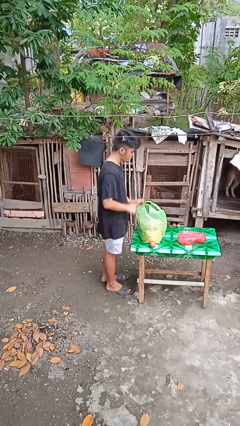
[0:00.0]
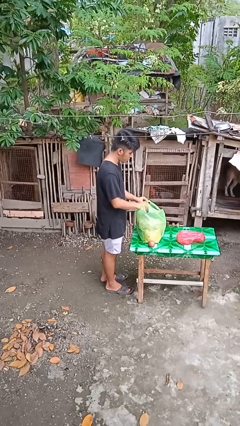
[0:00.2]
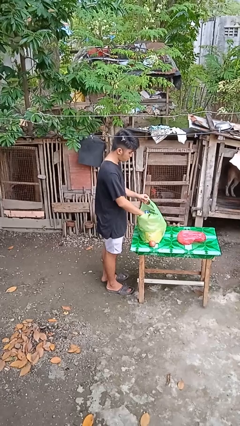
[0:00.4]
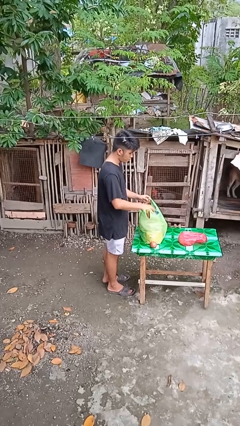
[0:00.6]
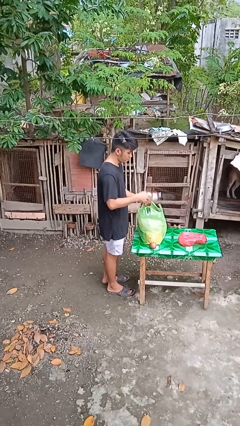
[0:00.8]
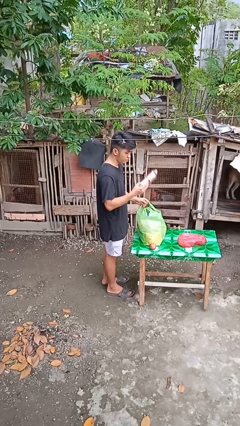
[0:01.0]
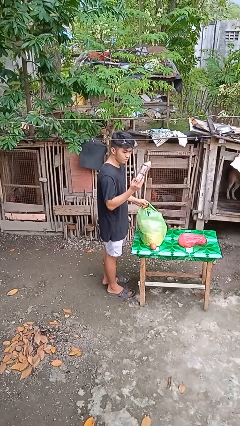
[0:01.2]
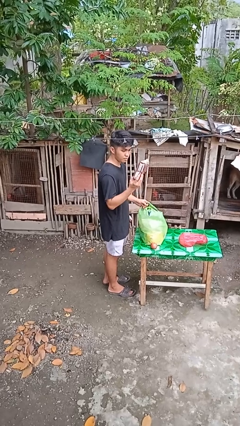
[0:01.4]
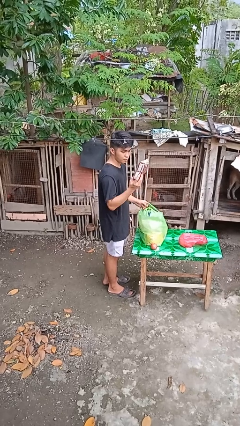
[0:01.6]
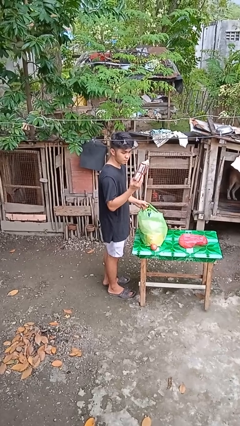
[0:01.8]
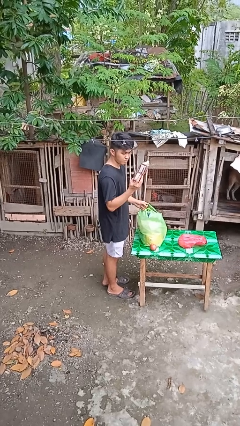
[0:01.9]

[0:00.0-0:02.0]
person takes object from bag

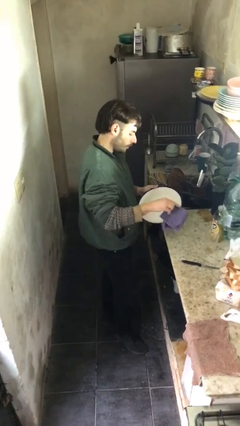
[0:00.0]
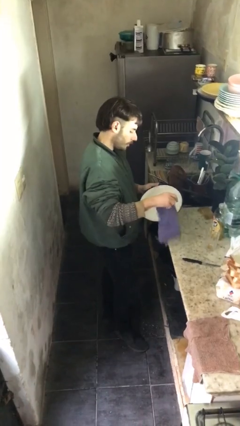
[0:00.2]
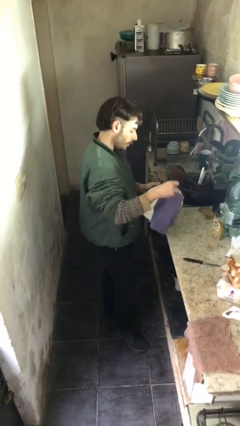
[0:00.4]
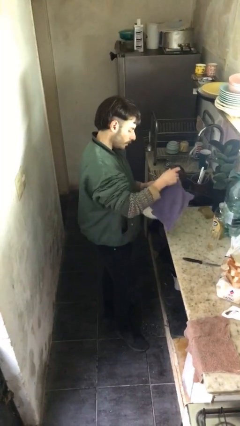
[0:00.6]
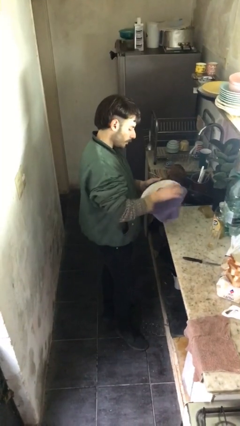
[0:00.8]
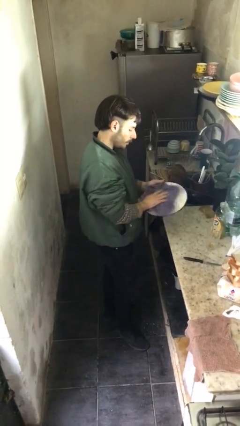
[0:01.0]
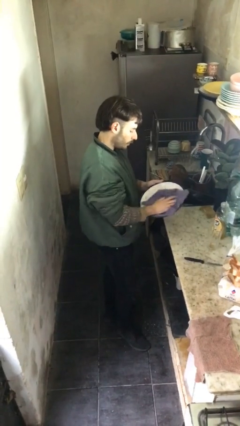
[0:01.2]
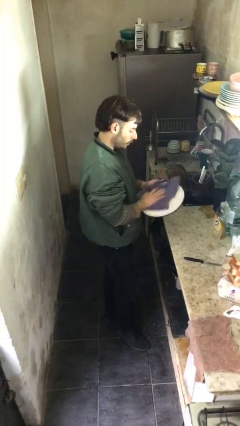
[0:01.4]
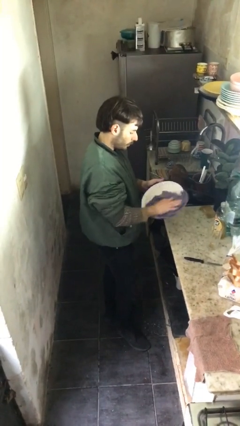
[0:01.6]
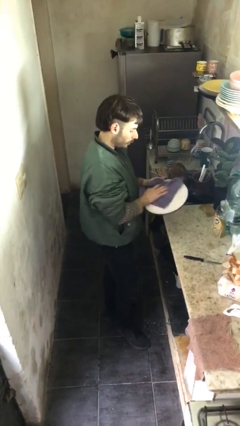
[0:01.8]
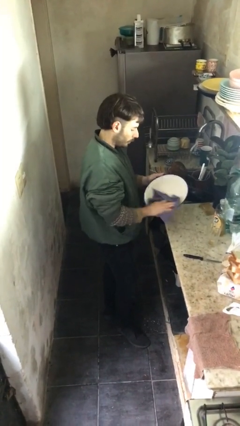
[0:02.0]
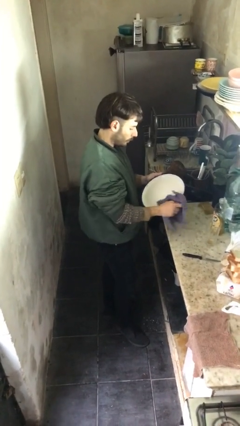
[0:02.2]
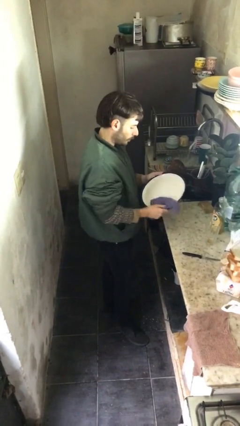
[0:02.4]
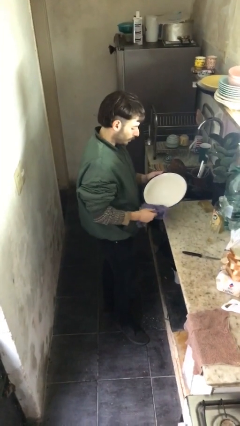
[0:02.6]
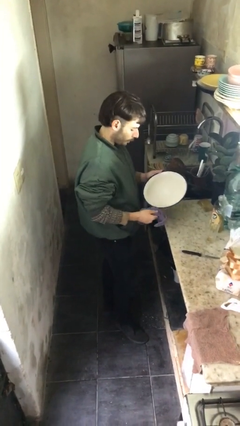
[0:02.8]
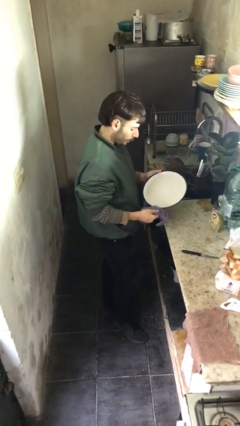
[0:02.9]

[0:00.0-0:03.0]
person dries dish

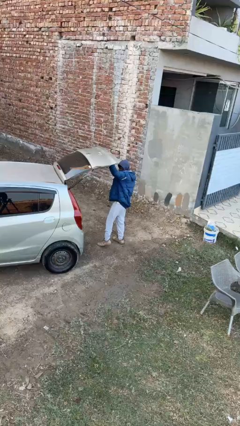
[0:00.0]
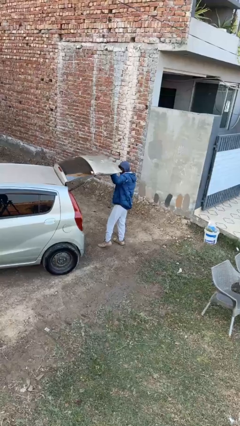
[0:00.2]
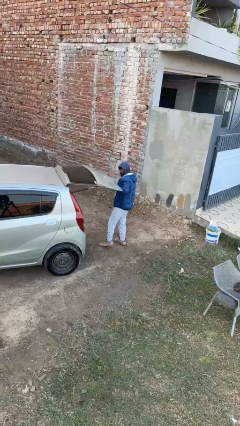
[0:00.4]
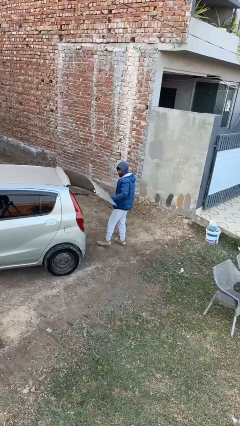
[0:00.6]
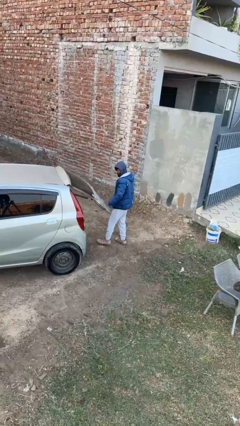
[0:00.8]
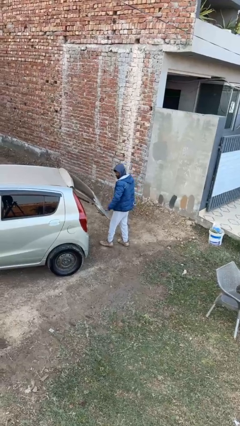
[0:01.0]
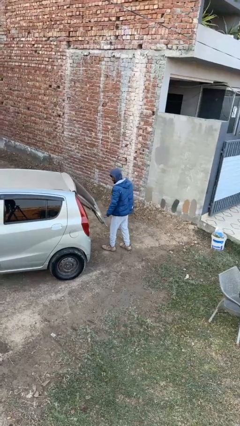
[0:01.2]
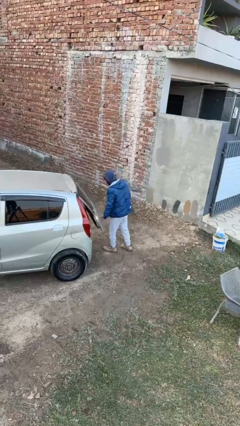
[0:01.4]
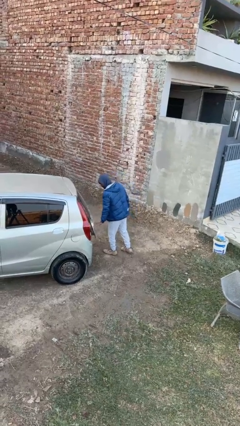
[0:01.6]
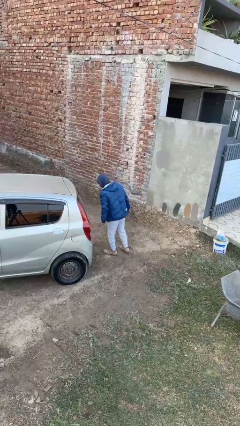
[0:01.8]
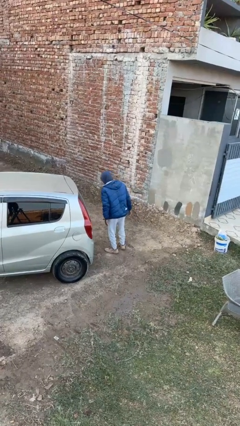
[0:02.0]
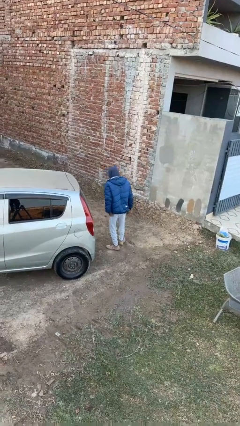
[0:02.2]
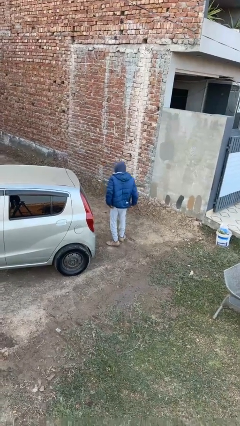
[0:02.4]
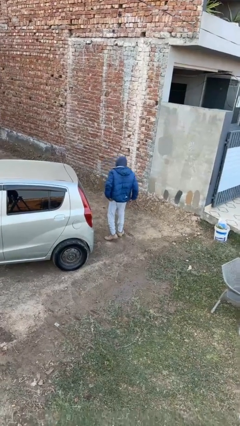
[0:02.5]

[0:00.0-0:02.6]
person closes car trunk

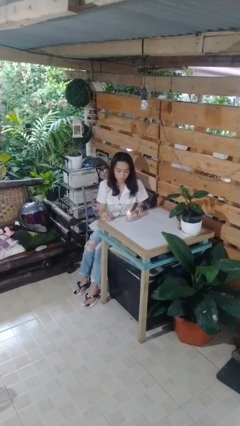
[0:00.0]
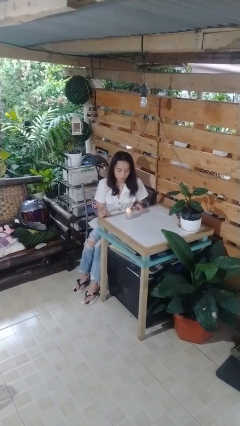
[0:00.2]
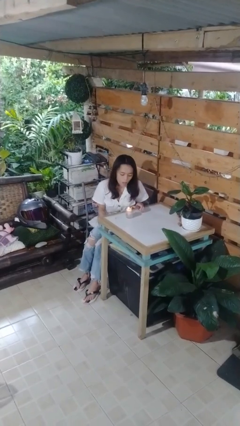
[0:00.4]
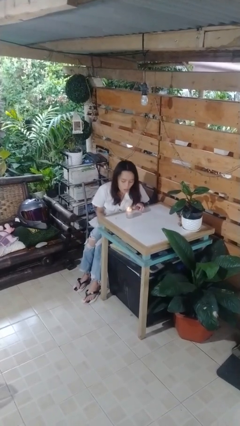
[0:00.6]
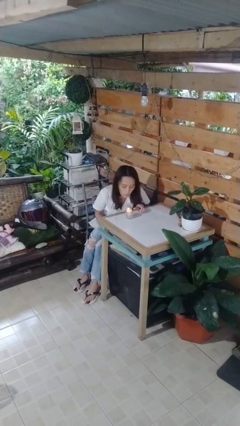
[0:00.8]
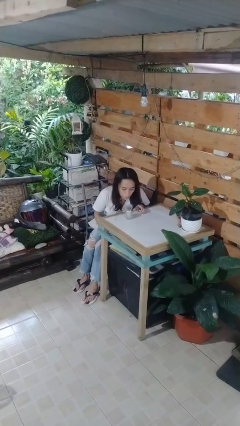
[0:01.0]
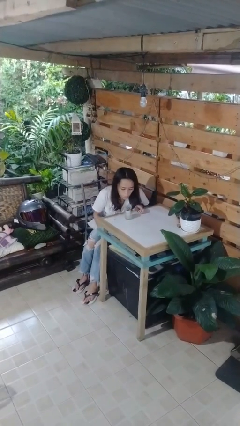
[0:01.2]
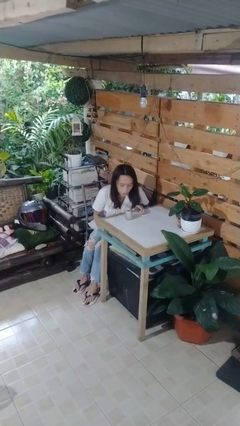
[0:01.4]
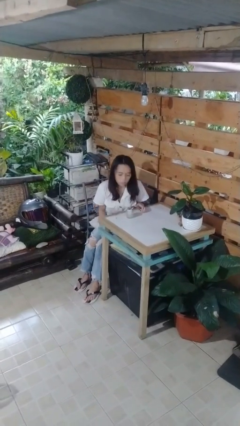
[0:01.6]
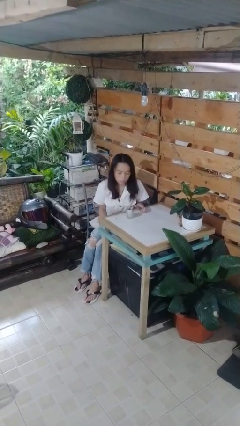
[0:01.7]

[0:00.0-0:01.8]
person extinguishes candle

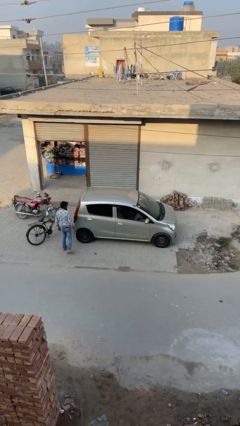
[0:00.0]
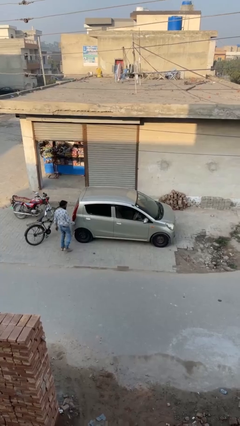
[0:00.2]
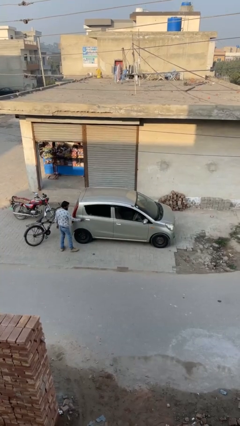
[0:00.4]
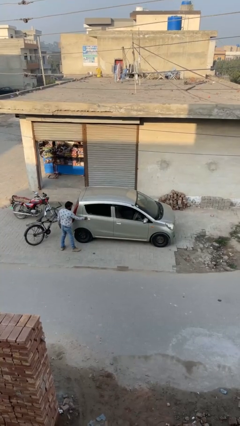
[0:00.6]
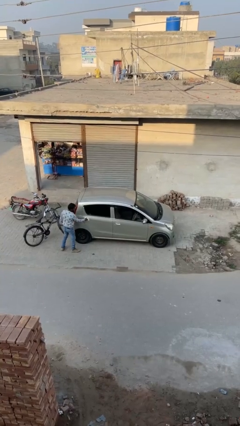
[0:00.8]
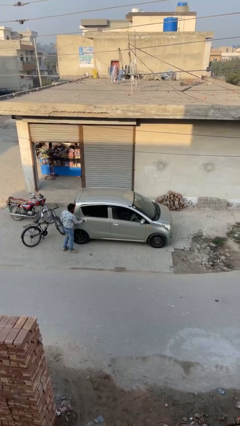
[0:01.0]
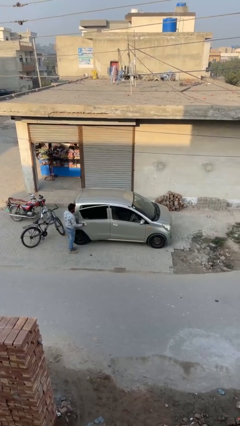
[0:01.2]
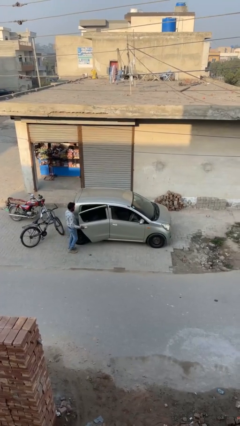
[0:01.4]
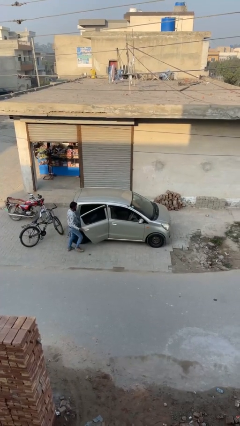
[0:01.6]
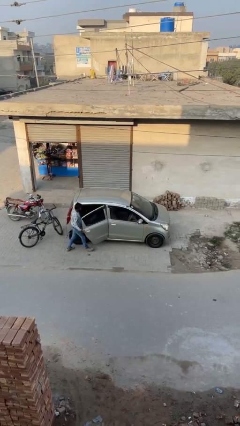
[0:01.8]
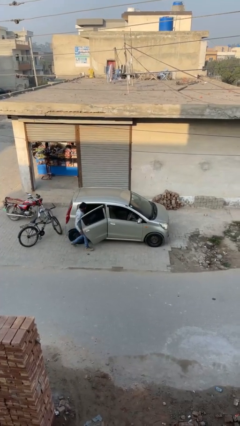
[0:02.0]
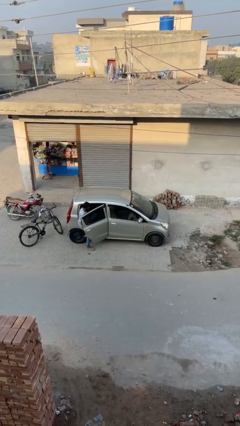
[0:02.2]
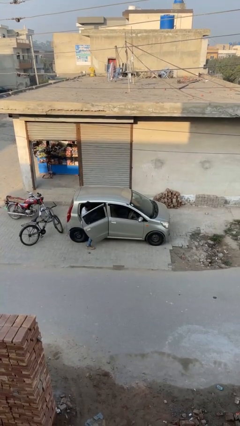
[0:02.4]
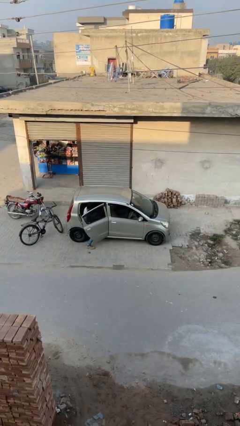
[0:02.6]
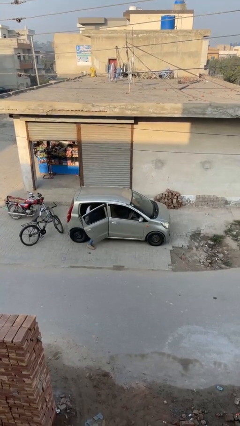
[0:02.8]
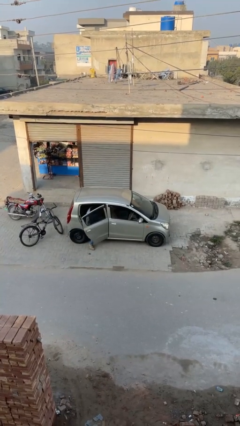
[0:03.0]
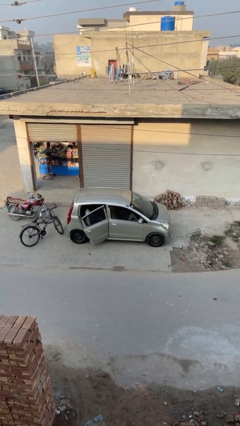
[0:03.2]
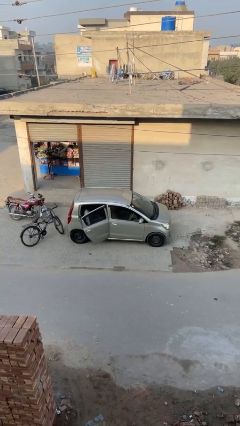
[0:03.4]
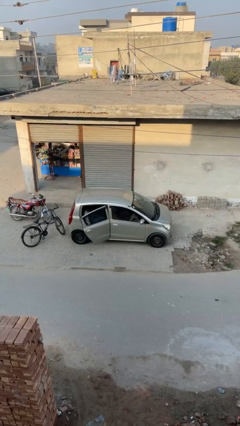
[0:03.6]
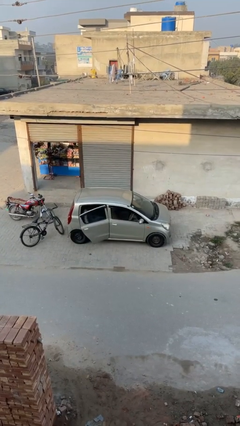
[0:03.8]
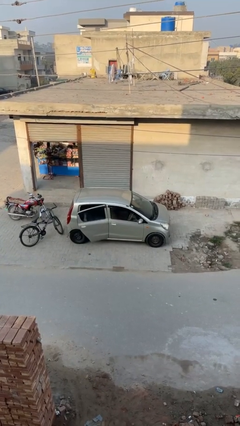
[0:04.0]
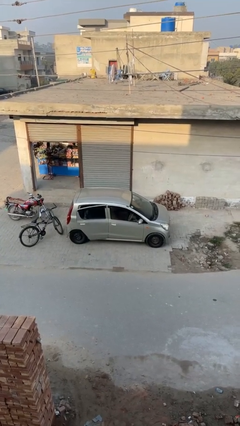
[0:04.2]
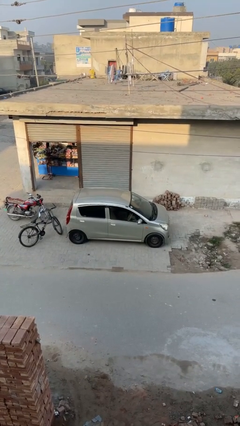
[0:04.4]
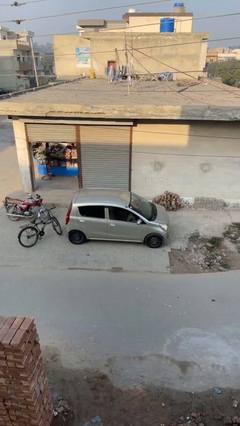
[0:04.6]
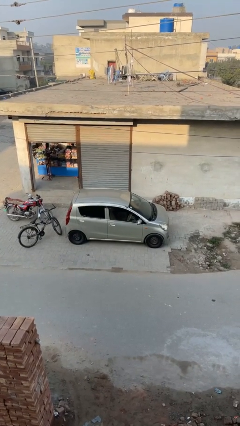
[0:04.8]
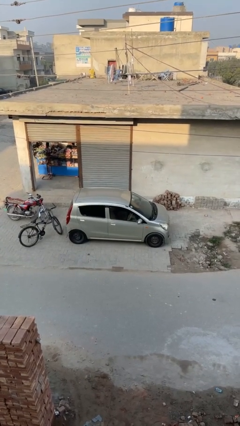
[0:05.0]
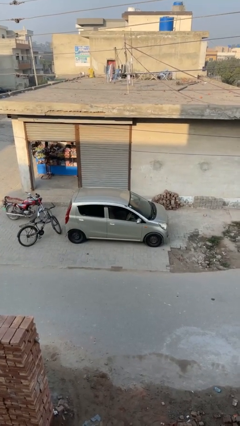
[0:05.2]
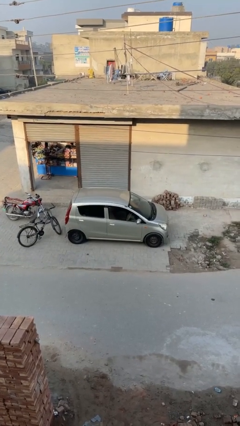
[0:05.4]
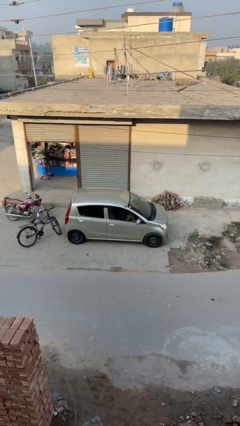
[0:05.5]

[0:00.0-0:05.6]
car picks up person

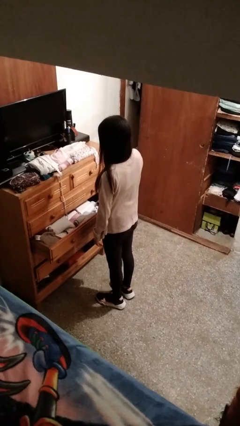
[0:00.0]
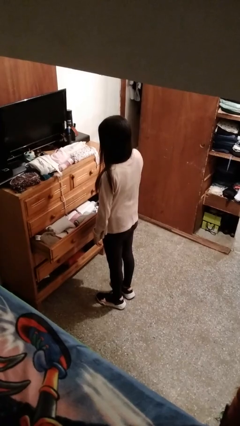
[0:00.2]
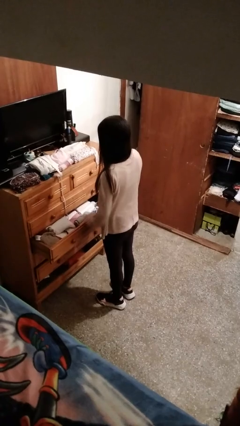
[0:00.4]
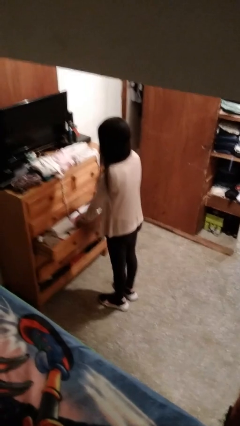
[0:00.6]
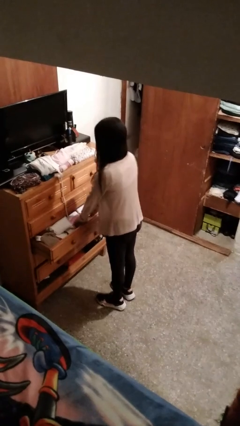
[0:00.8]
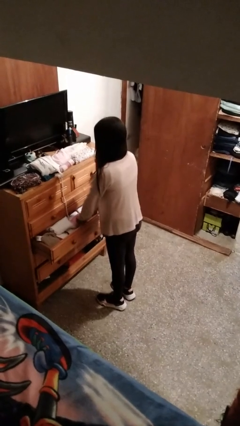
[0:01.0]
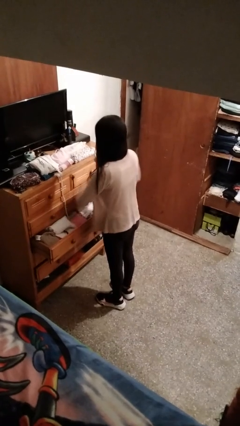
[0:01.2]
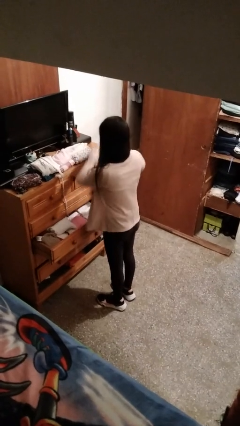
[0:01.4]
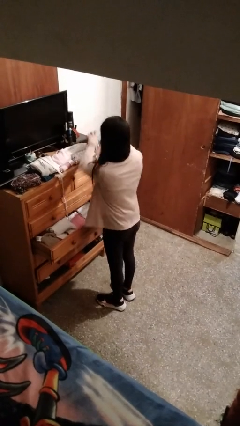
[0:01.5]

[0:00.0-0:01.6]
person takes clothes from dresser

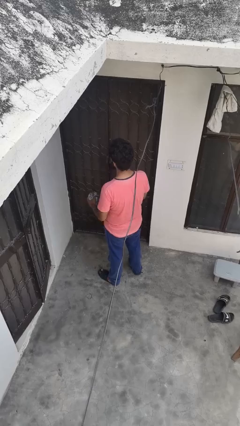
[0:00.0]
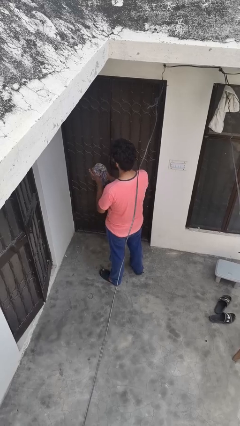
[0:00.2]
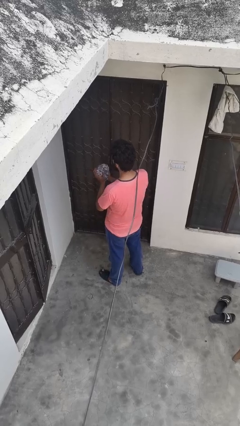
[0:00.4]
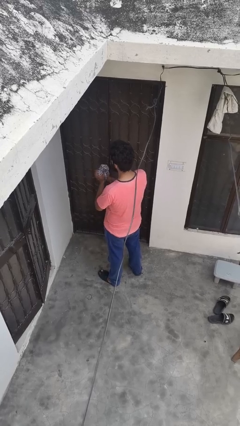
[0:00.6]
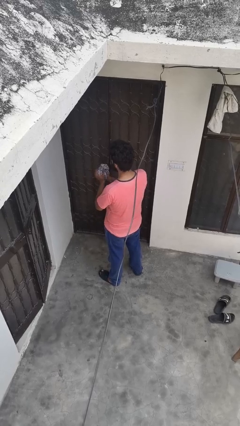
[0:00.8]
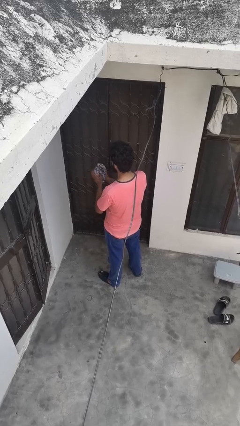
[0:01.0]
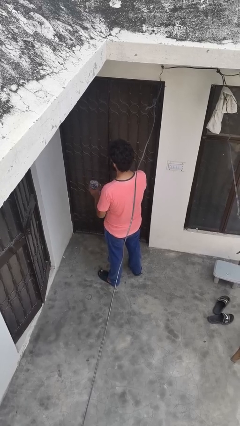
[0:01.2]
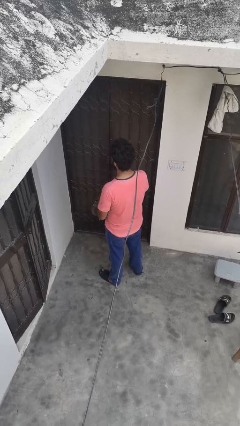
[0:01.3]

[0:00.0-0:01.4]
person squeezes object
